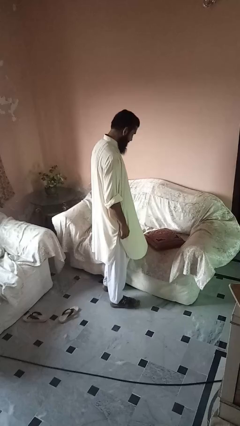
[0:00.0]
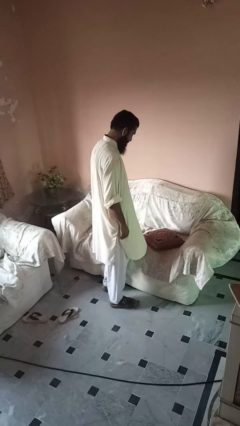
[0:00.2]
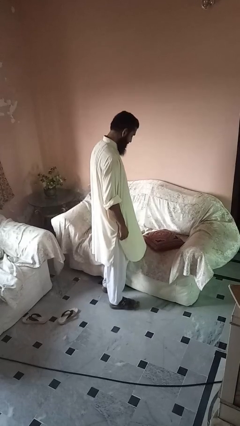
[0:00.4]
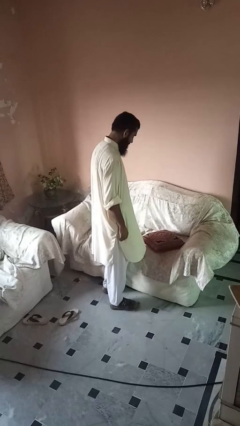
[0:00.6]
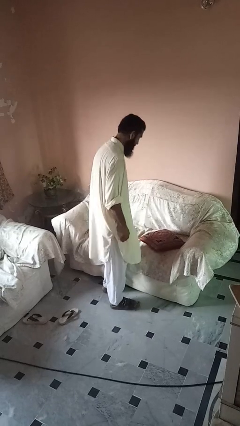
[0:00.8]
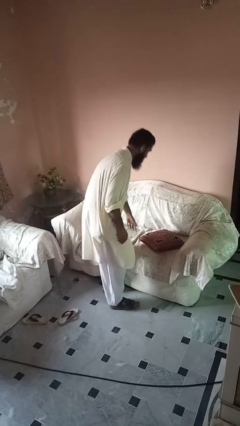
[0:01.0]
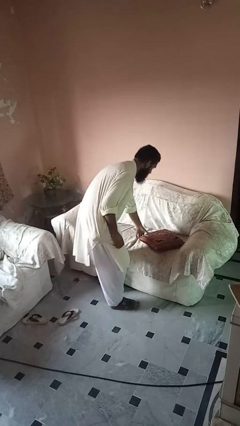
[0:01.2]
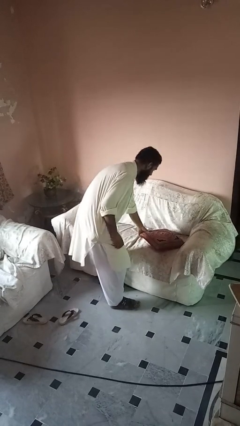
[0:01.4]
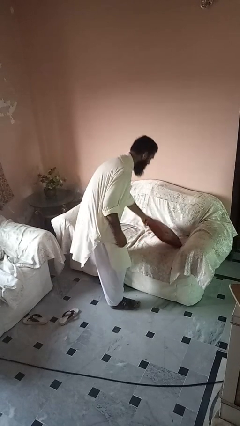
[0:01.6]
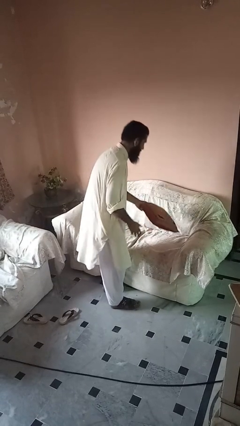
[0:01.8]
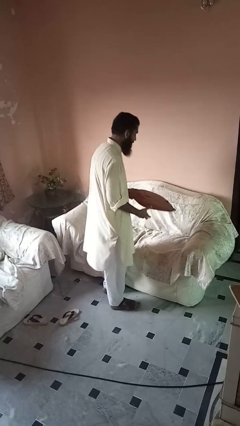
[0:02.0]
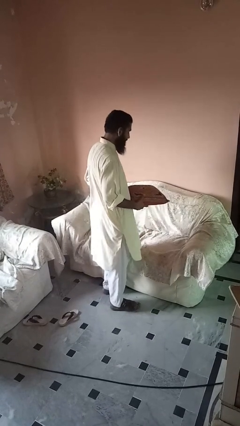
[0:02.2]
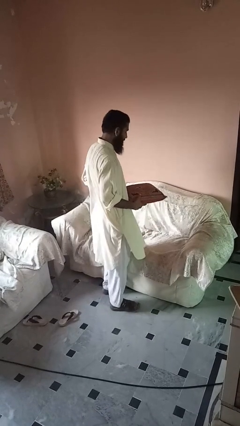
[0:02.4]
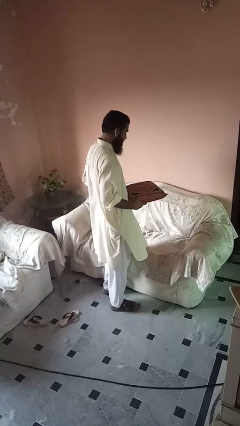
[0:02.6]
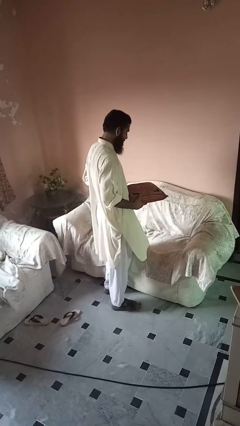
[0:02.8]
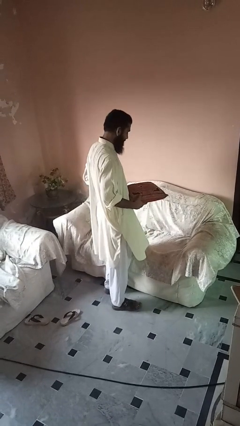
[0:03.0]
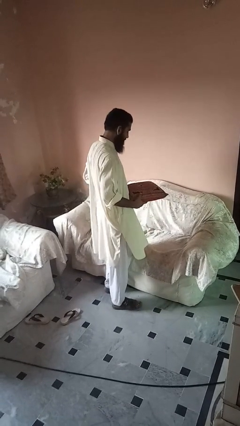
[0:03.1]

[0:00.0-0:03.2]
person picks up object from couch

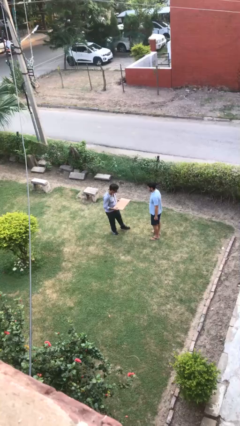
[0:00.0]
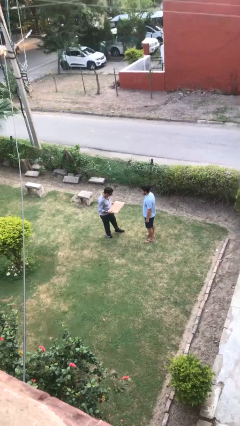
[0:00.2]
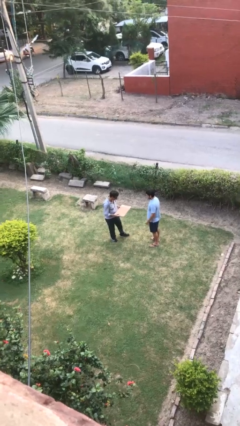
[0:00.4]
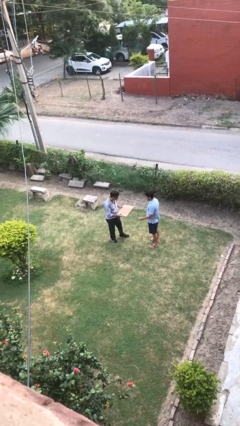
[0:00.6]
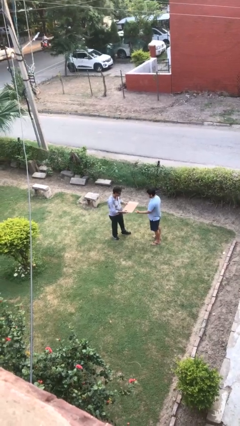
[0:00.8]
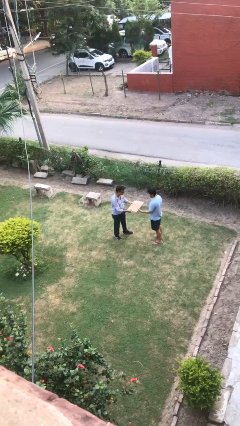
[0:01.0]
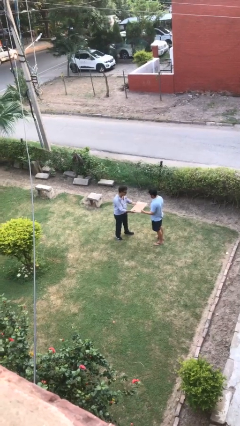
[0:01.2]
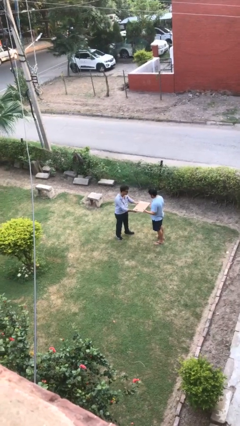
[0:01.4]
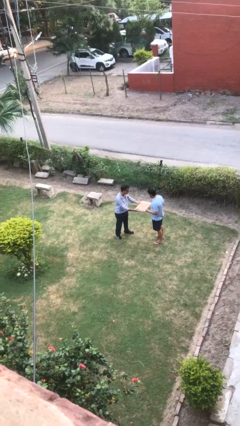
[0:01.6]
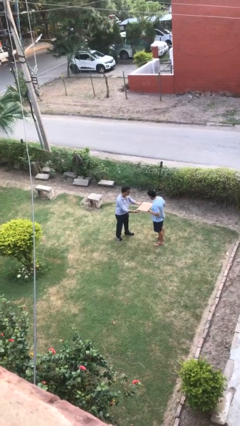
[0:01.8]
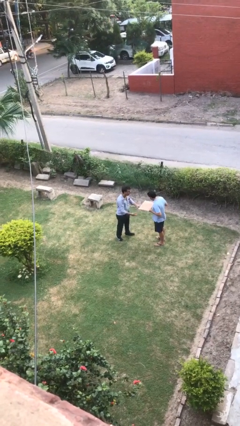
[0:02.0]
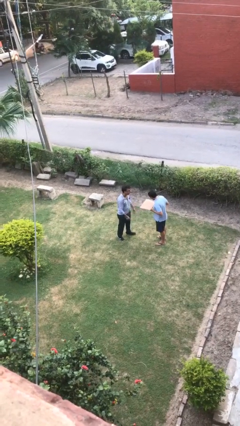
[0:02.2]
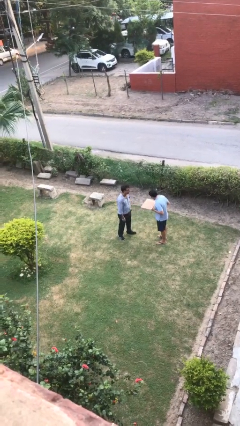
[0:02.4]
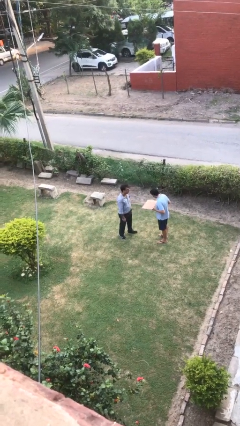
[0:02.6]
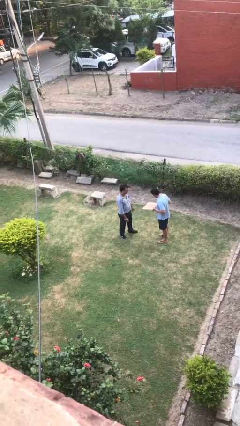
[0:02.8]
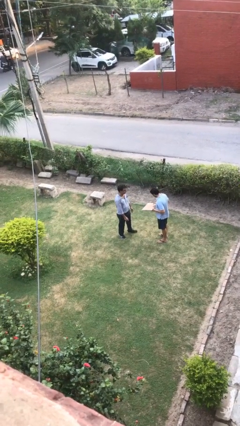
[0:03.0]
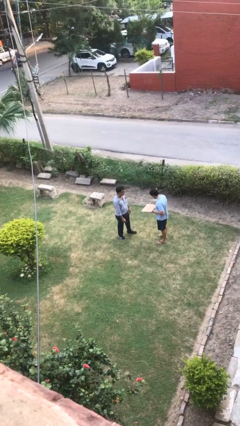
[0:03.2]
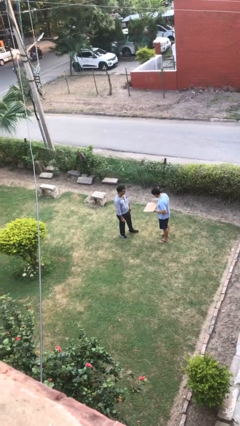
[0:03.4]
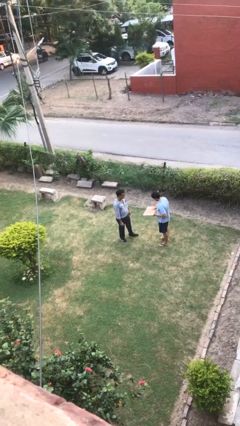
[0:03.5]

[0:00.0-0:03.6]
person transfers object to person

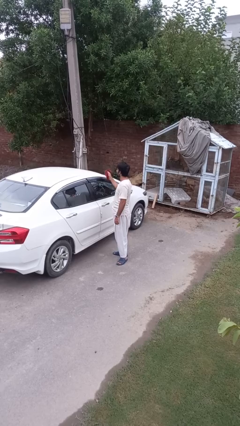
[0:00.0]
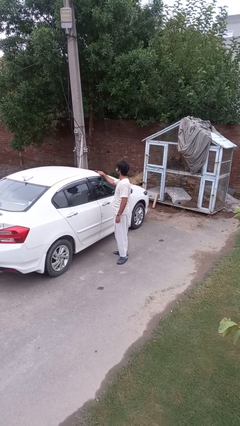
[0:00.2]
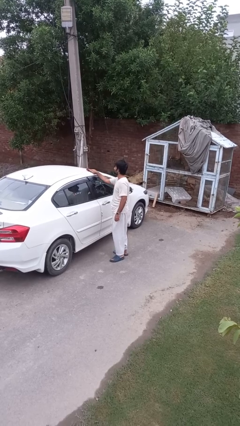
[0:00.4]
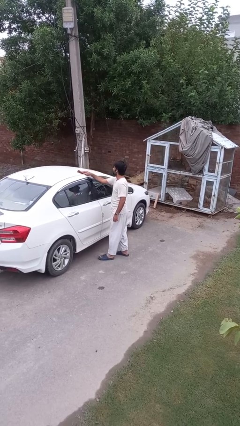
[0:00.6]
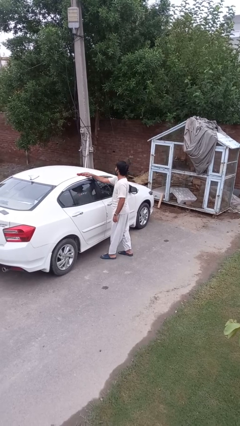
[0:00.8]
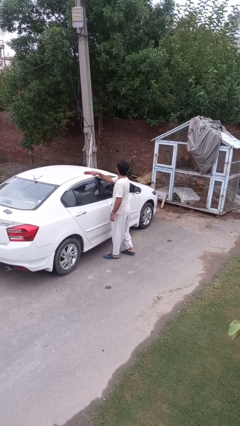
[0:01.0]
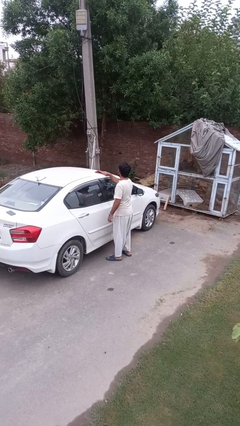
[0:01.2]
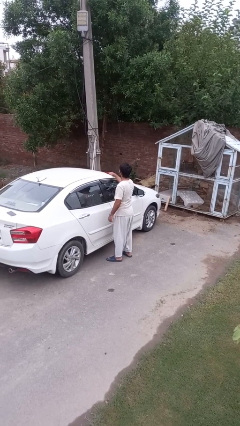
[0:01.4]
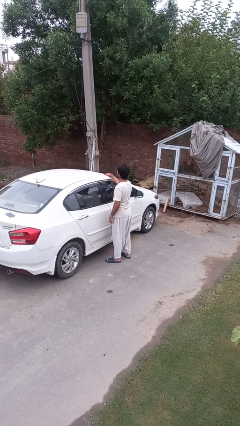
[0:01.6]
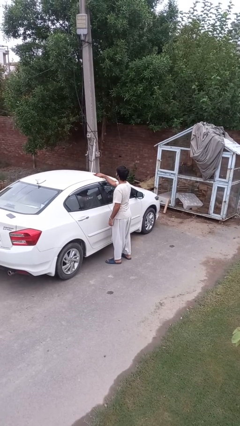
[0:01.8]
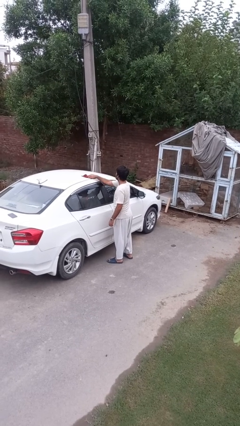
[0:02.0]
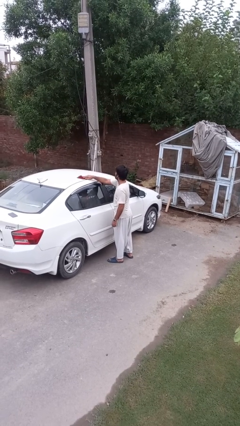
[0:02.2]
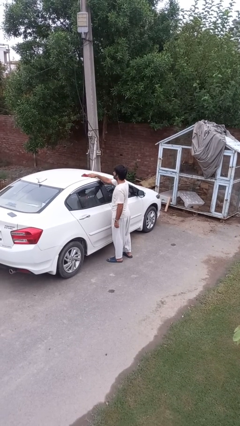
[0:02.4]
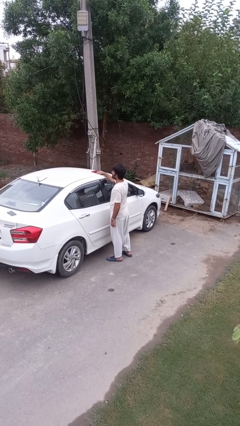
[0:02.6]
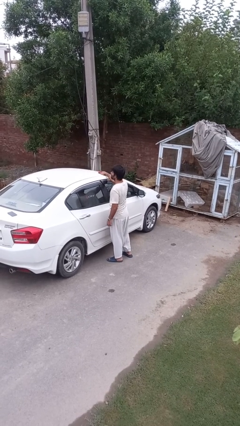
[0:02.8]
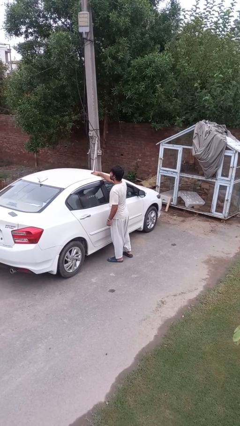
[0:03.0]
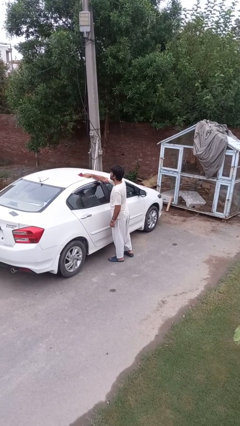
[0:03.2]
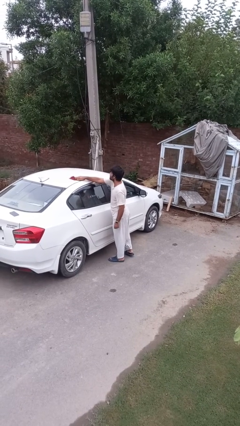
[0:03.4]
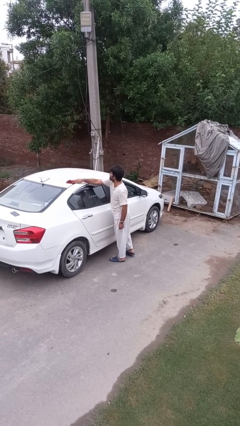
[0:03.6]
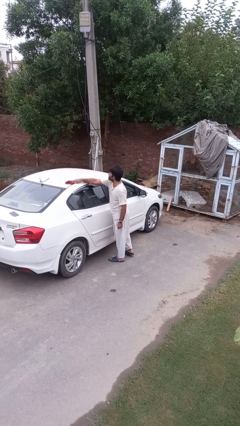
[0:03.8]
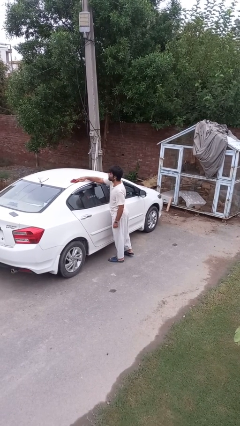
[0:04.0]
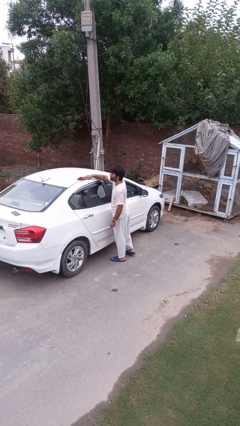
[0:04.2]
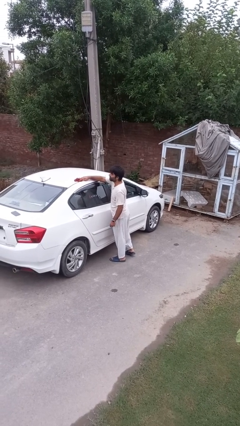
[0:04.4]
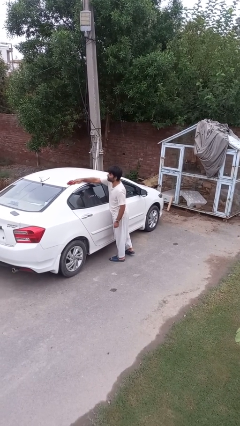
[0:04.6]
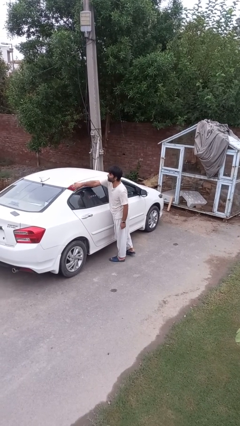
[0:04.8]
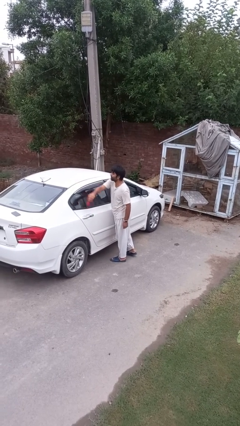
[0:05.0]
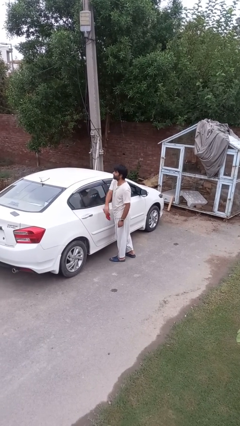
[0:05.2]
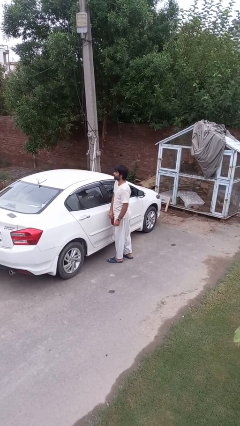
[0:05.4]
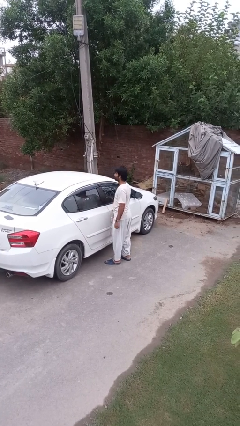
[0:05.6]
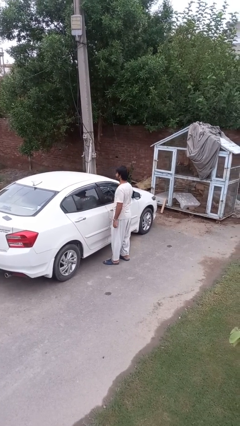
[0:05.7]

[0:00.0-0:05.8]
person polishes car with rag

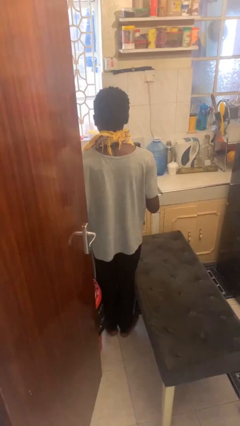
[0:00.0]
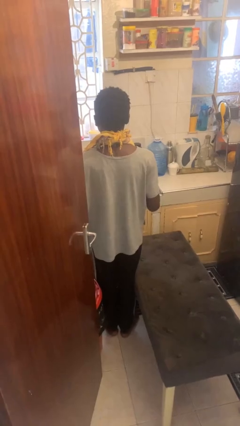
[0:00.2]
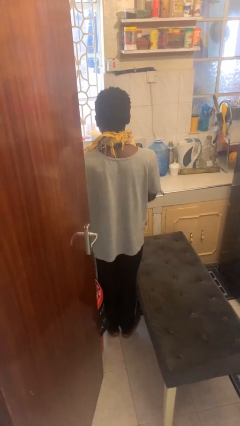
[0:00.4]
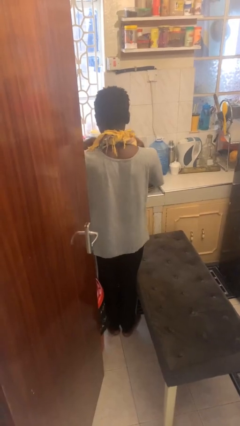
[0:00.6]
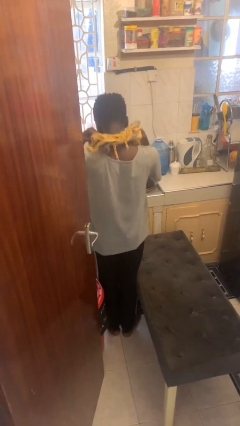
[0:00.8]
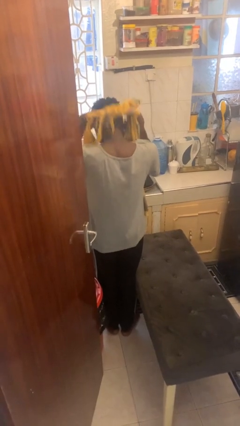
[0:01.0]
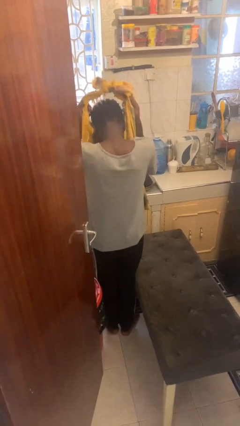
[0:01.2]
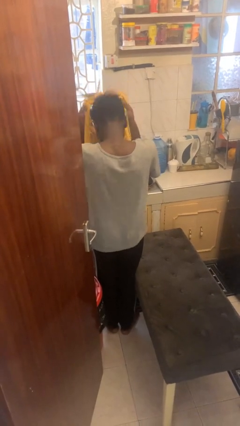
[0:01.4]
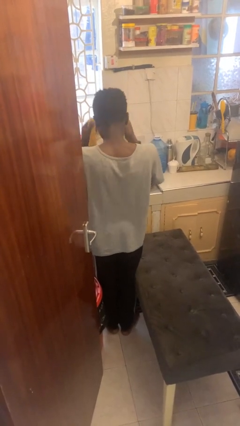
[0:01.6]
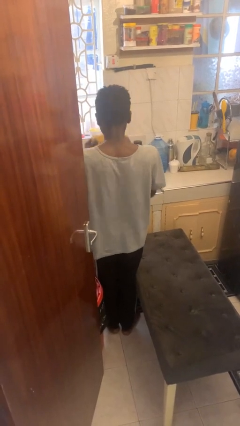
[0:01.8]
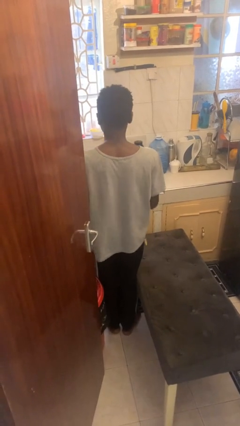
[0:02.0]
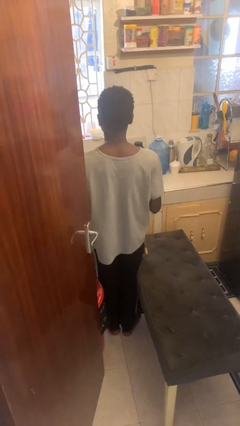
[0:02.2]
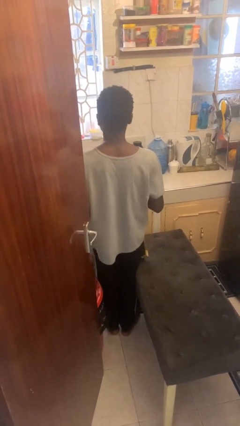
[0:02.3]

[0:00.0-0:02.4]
person takes off apron

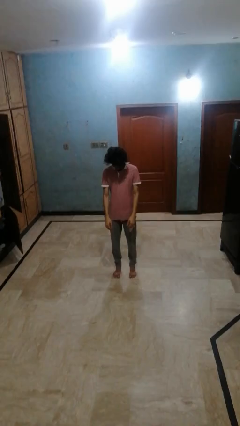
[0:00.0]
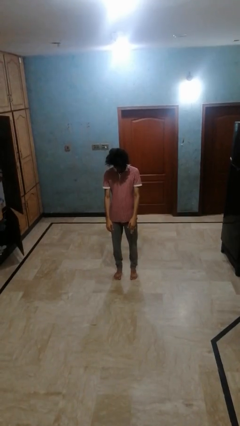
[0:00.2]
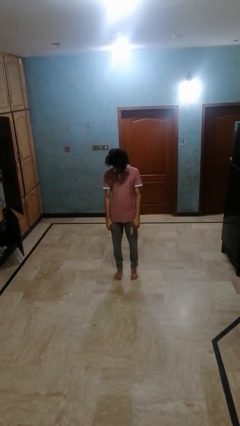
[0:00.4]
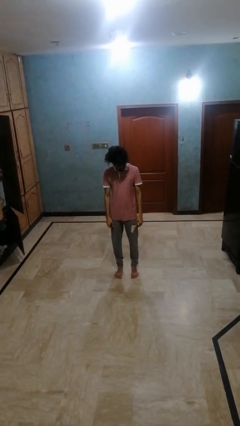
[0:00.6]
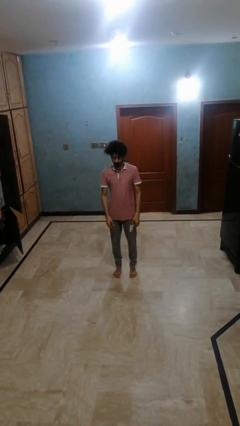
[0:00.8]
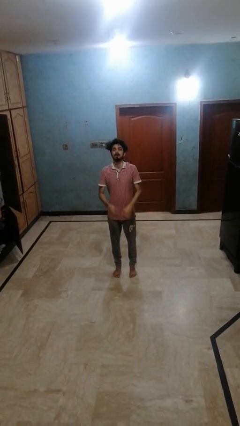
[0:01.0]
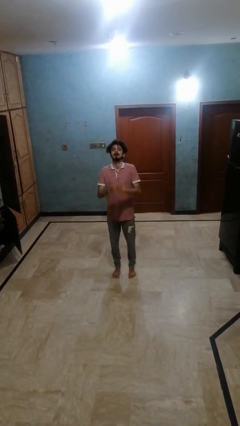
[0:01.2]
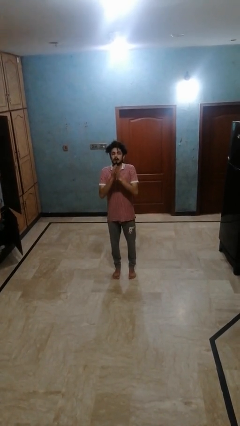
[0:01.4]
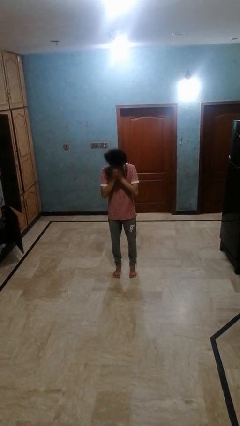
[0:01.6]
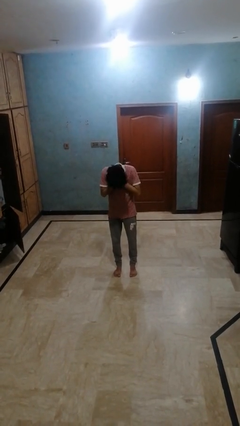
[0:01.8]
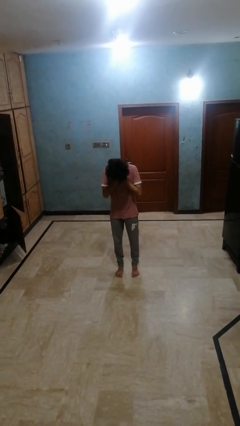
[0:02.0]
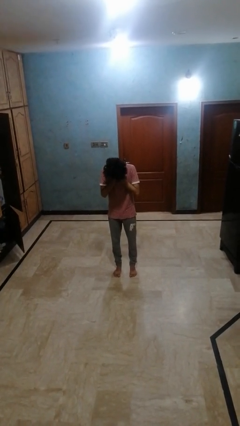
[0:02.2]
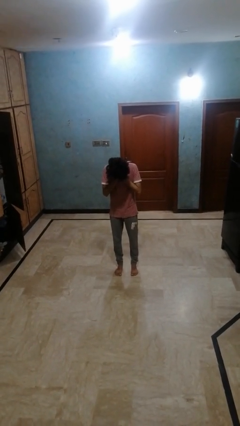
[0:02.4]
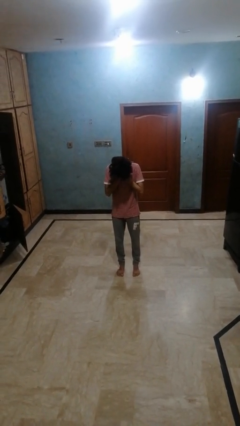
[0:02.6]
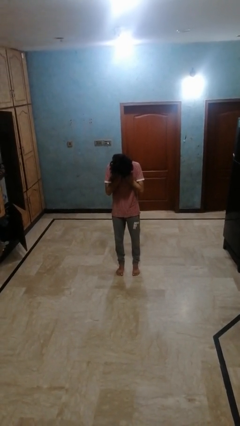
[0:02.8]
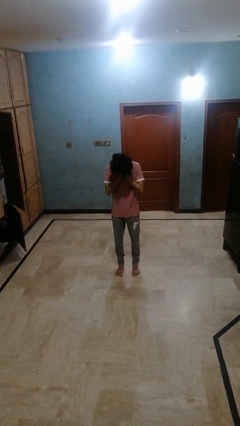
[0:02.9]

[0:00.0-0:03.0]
person sneezes into hand
